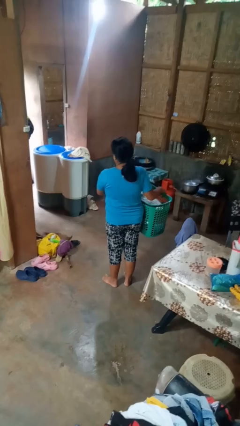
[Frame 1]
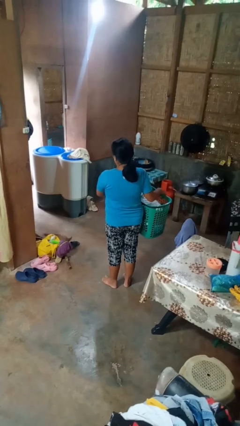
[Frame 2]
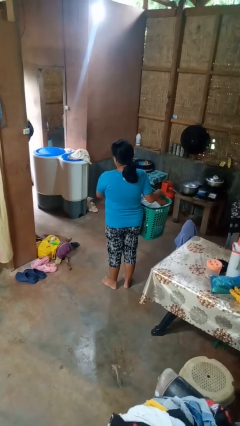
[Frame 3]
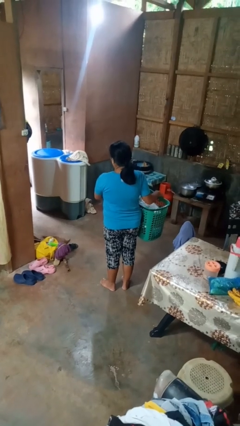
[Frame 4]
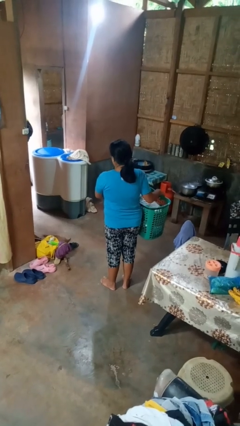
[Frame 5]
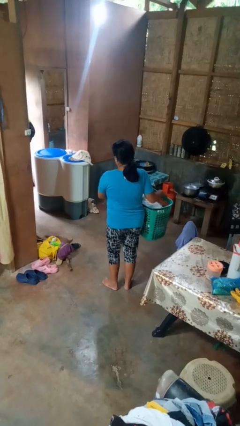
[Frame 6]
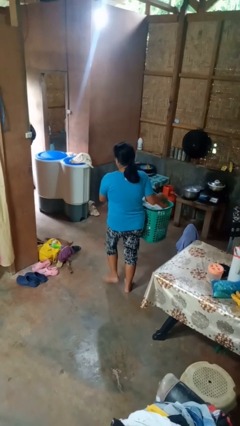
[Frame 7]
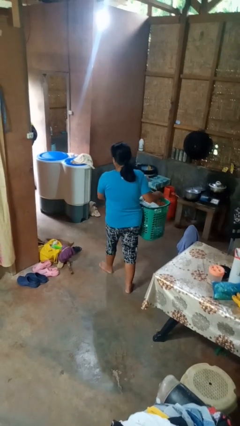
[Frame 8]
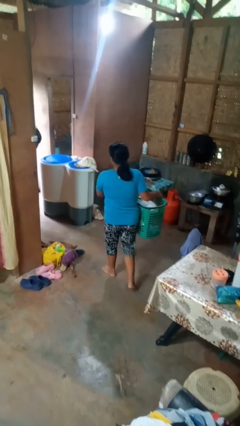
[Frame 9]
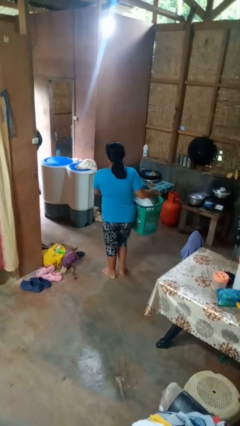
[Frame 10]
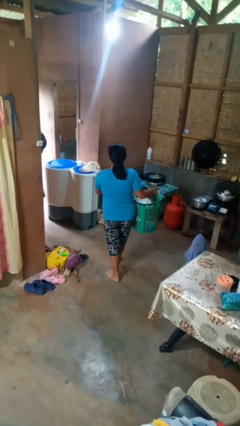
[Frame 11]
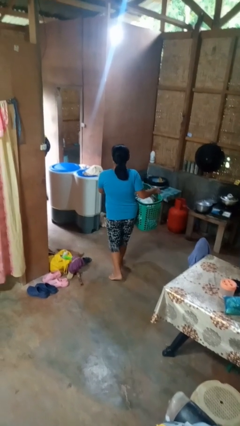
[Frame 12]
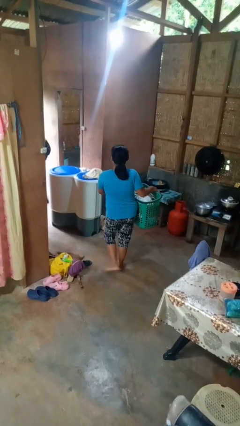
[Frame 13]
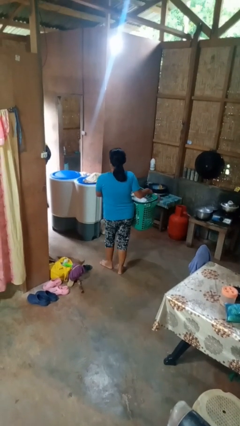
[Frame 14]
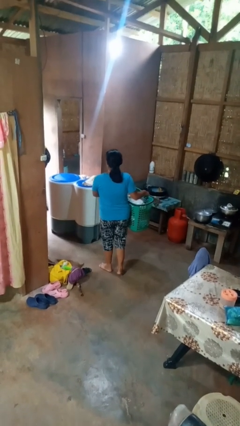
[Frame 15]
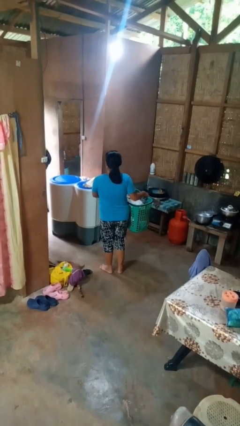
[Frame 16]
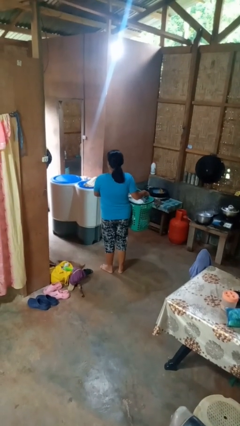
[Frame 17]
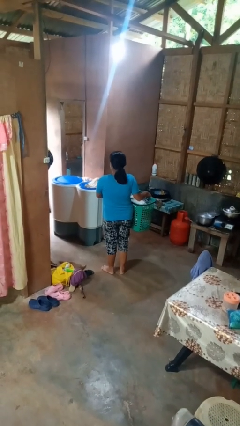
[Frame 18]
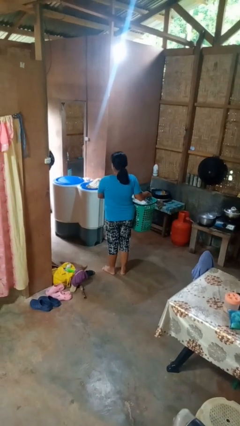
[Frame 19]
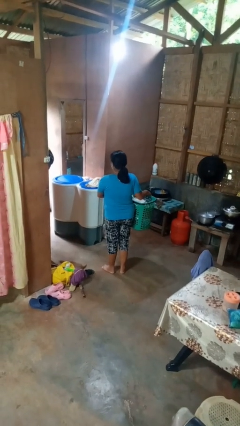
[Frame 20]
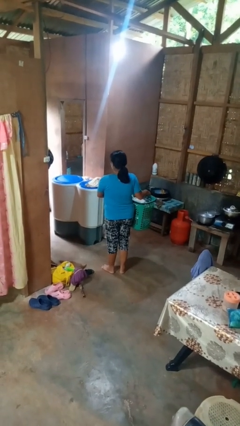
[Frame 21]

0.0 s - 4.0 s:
person carries laundry basket

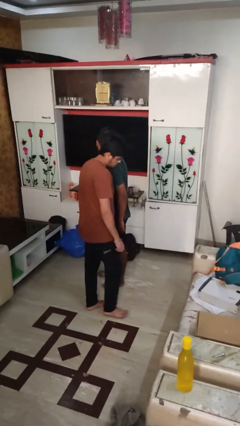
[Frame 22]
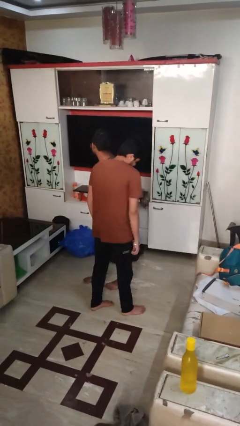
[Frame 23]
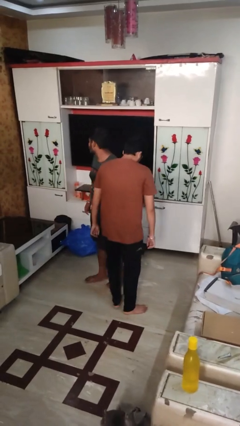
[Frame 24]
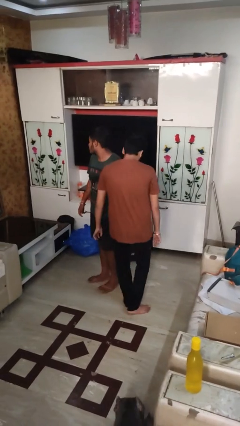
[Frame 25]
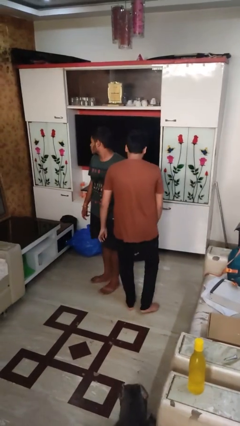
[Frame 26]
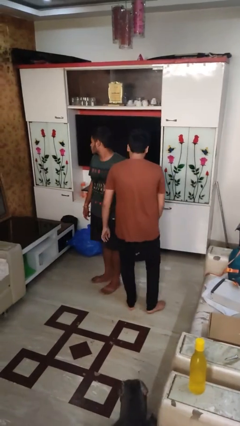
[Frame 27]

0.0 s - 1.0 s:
person bumps into person

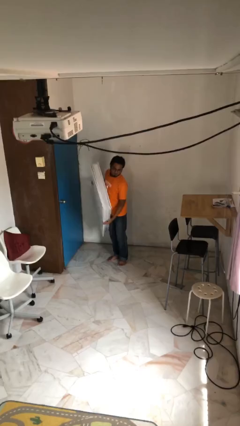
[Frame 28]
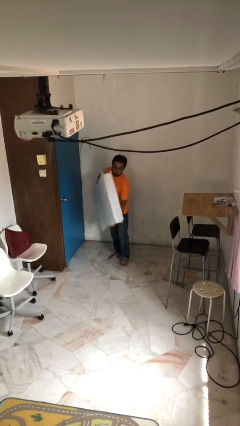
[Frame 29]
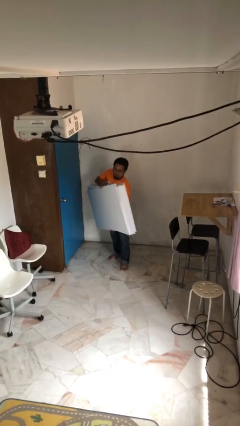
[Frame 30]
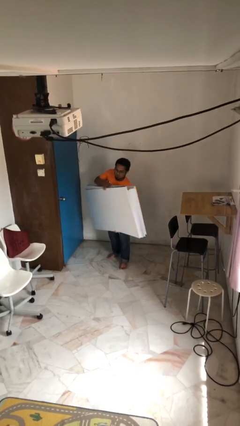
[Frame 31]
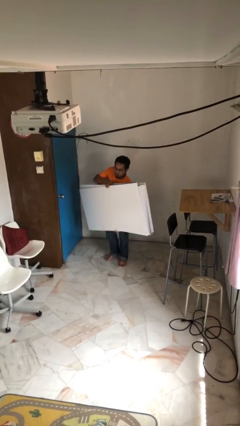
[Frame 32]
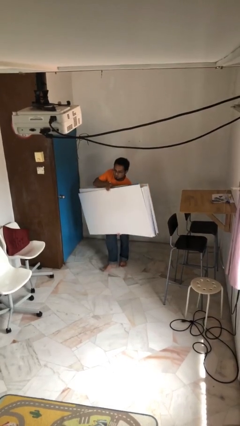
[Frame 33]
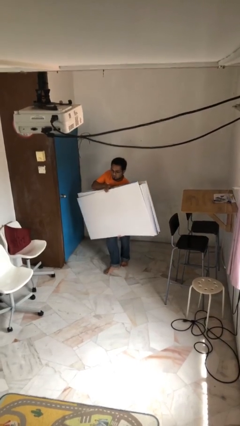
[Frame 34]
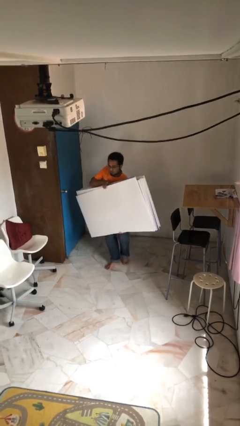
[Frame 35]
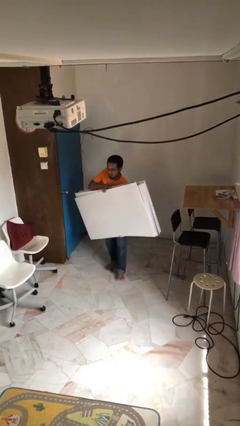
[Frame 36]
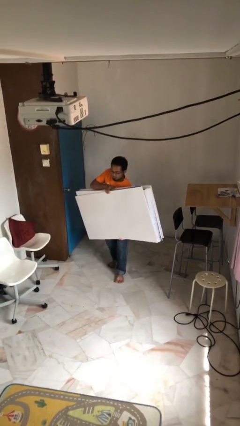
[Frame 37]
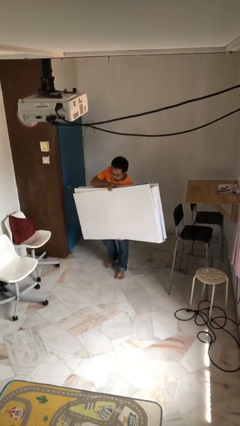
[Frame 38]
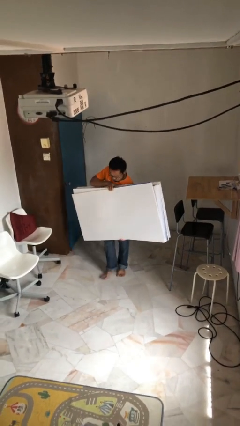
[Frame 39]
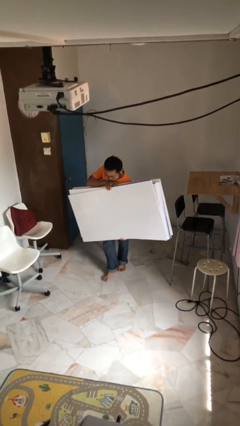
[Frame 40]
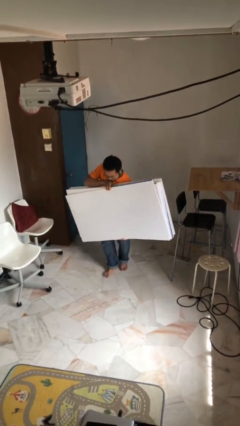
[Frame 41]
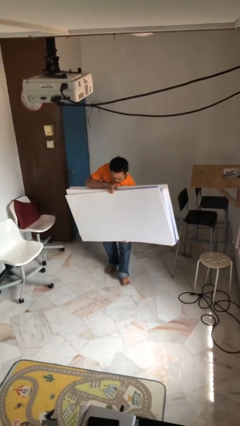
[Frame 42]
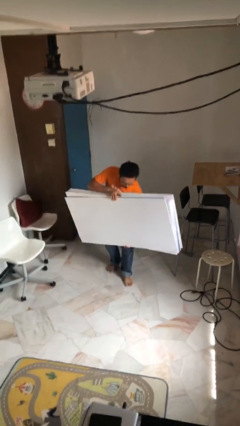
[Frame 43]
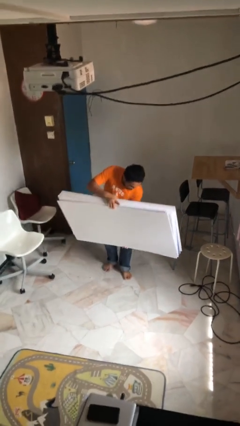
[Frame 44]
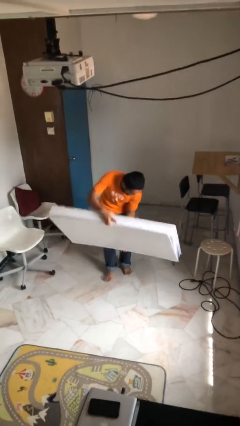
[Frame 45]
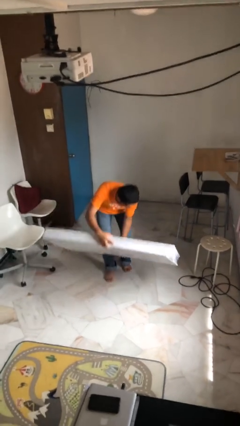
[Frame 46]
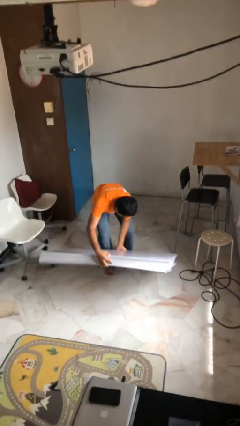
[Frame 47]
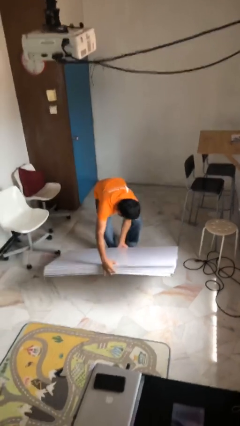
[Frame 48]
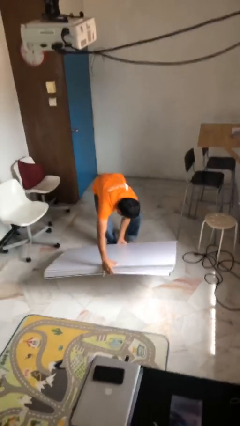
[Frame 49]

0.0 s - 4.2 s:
person carries heavy object

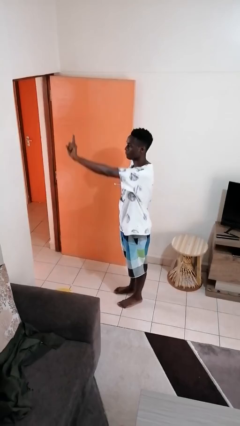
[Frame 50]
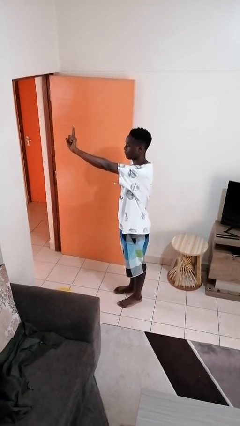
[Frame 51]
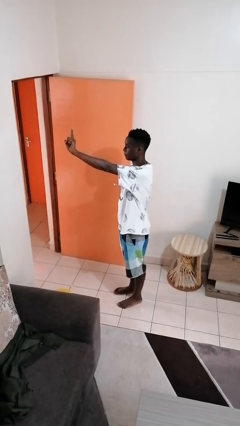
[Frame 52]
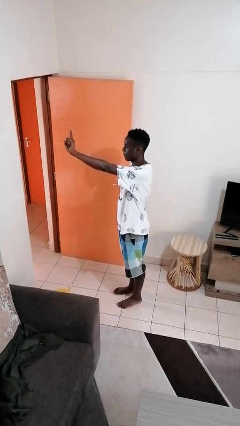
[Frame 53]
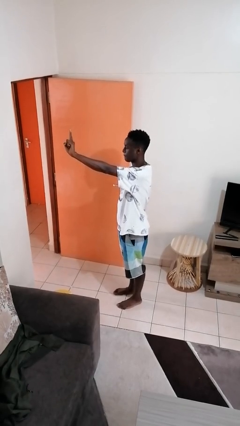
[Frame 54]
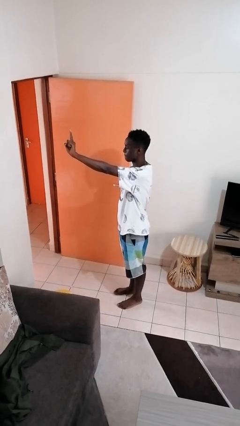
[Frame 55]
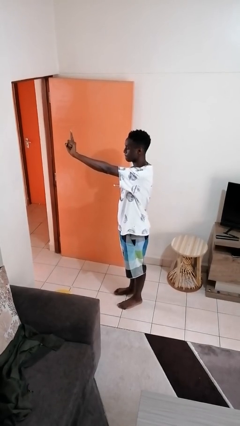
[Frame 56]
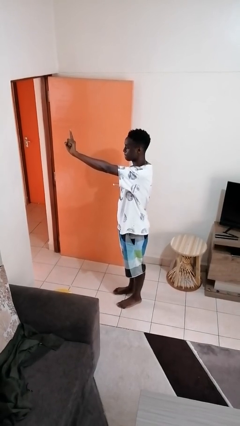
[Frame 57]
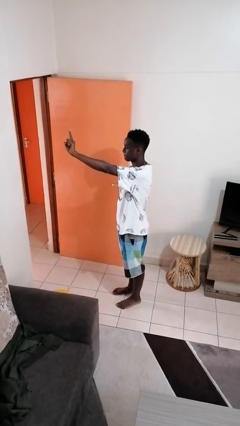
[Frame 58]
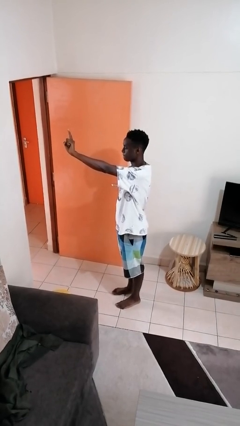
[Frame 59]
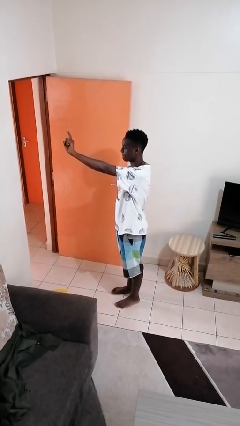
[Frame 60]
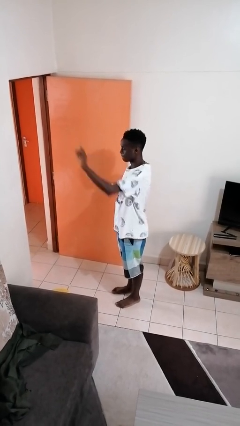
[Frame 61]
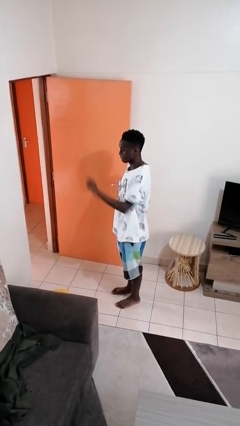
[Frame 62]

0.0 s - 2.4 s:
person gestures number one

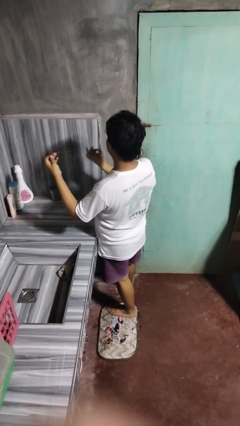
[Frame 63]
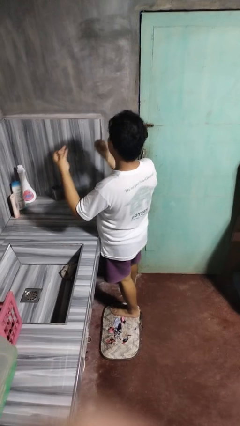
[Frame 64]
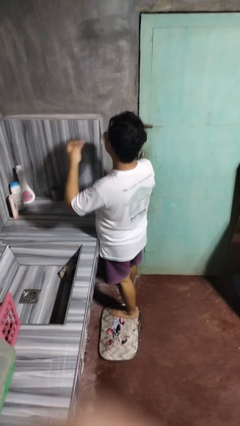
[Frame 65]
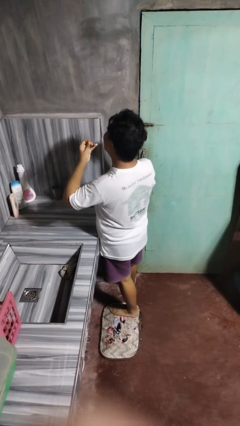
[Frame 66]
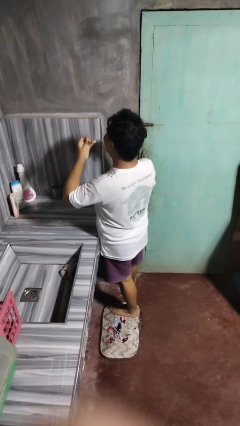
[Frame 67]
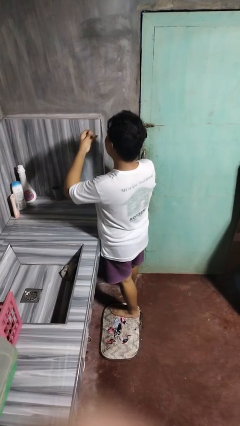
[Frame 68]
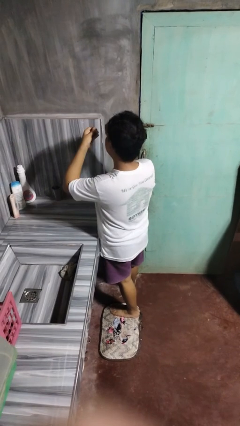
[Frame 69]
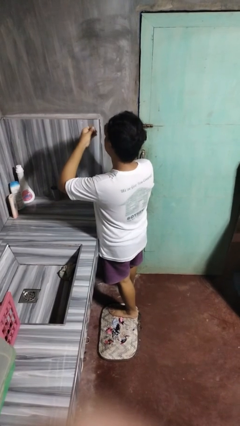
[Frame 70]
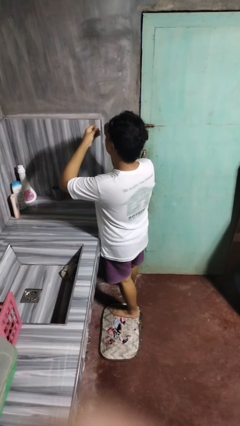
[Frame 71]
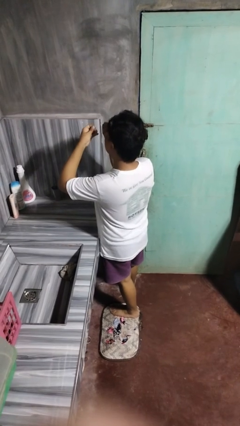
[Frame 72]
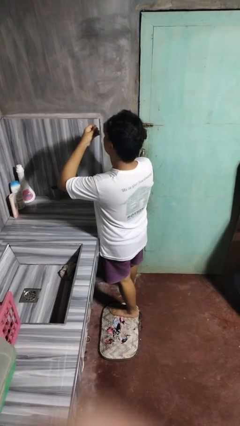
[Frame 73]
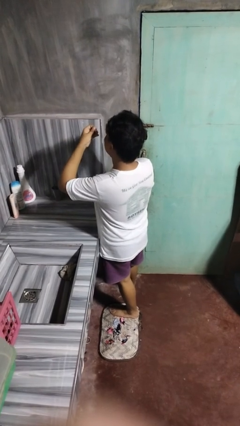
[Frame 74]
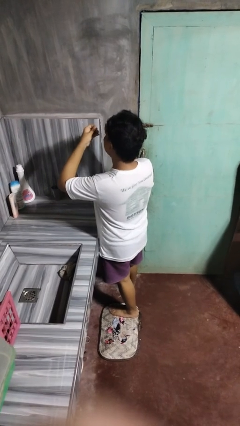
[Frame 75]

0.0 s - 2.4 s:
person flosses

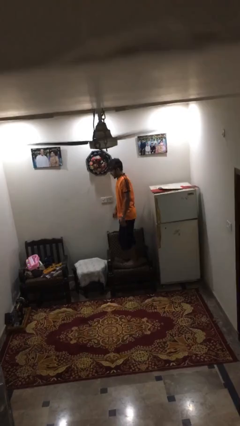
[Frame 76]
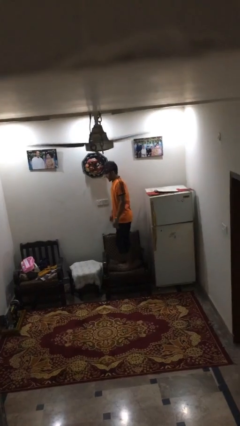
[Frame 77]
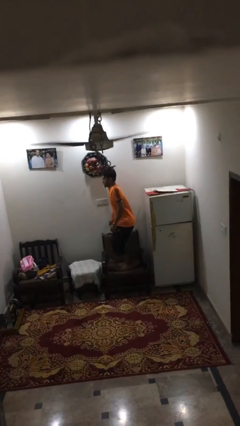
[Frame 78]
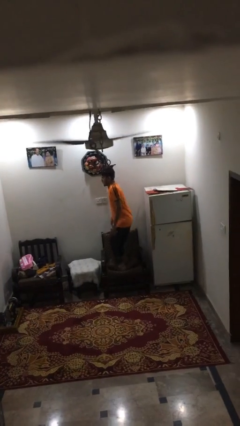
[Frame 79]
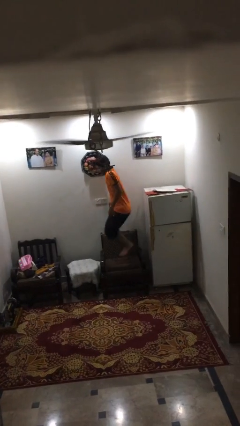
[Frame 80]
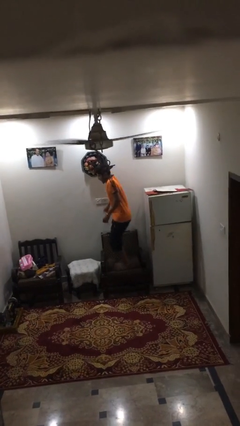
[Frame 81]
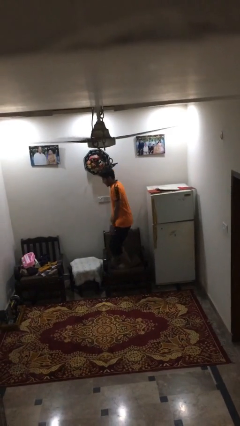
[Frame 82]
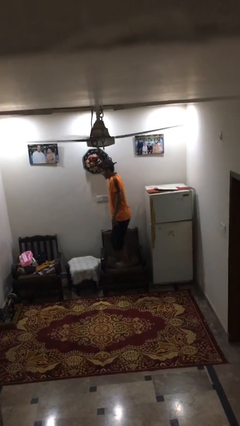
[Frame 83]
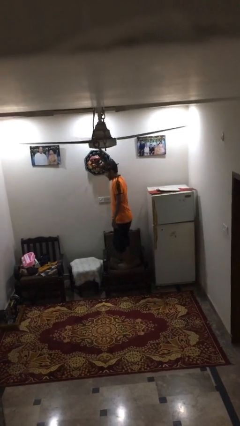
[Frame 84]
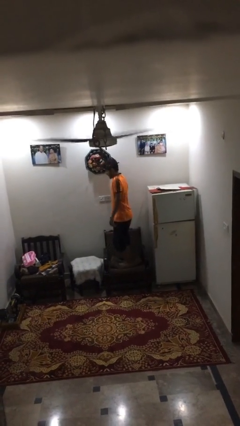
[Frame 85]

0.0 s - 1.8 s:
person jumps on couch

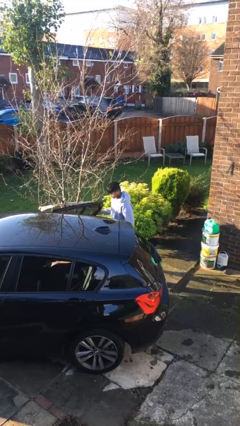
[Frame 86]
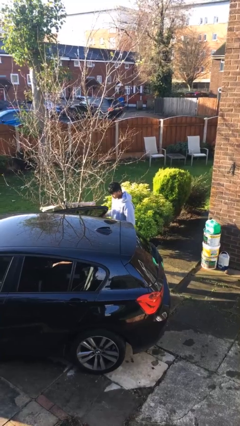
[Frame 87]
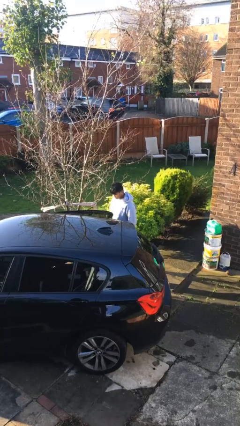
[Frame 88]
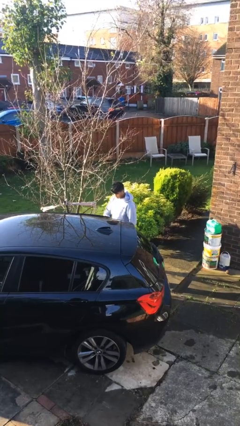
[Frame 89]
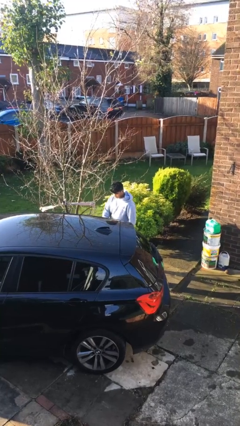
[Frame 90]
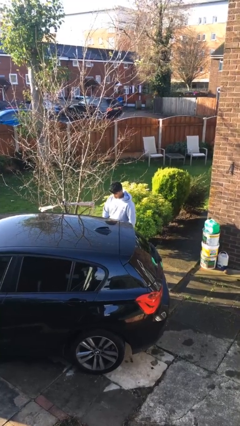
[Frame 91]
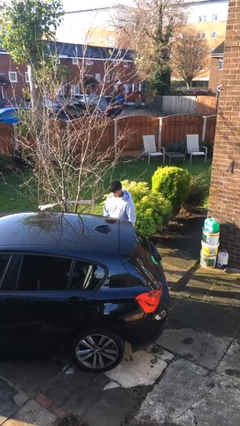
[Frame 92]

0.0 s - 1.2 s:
person closes car door
